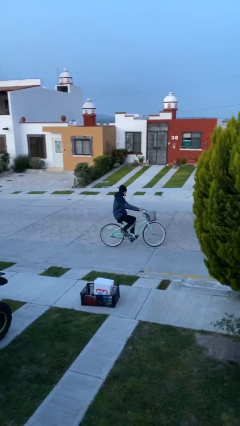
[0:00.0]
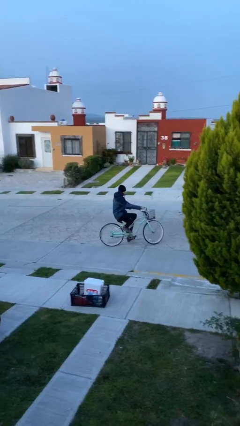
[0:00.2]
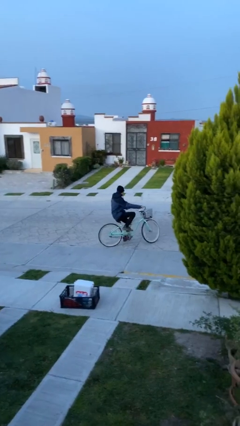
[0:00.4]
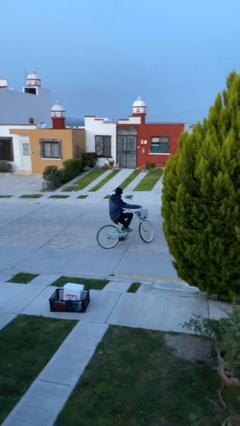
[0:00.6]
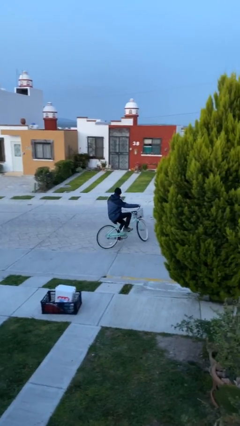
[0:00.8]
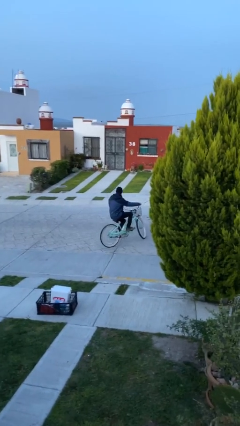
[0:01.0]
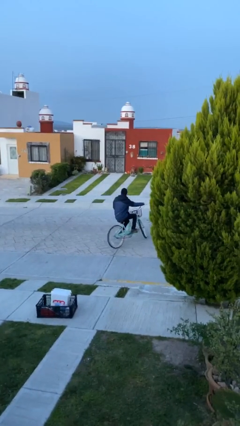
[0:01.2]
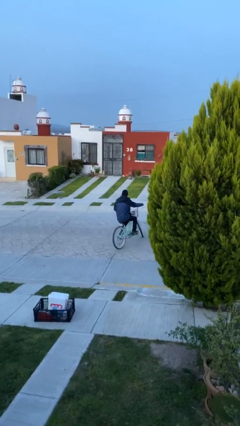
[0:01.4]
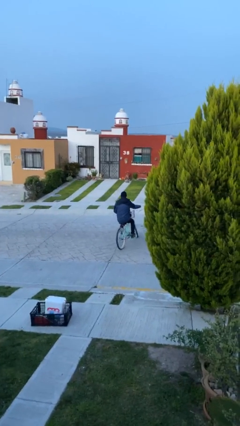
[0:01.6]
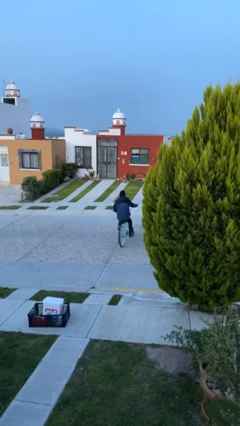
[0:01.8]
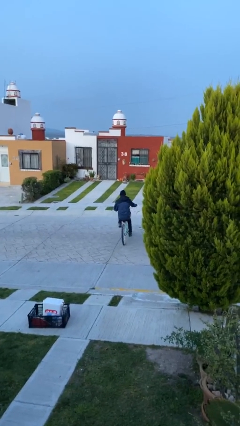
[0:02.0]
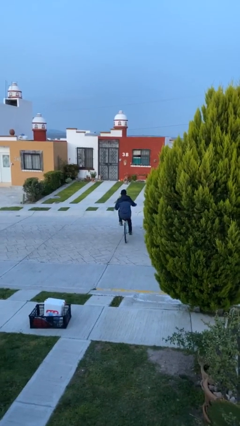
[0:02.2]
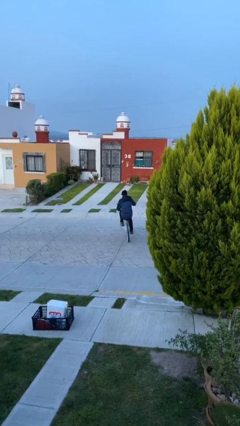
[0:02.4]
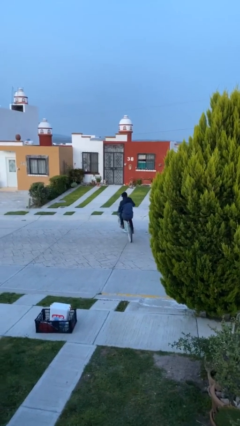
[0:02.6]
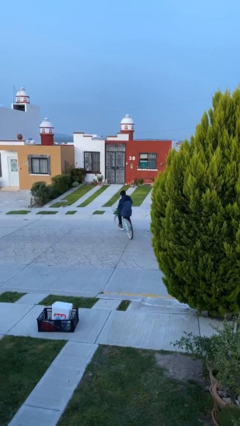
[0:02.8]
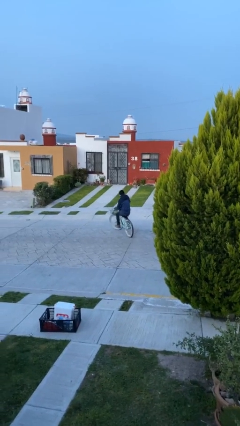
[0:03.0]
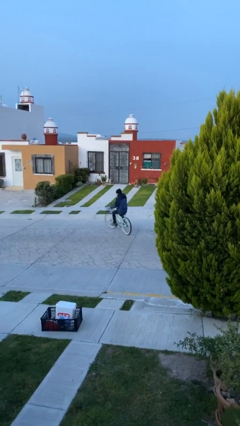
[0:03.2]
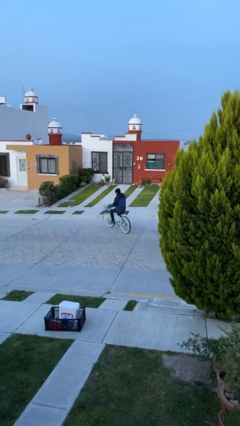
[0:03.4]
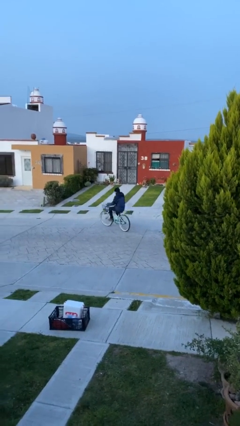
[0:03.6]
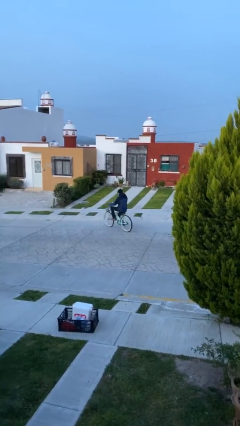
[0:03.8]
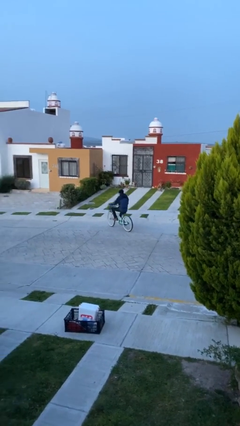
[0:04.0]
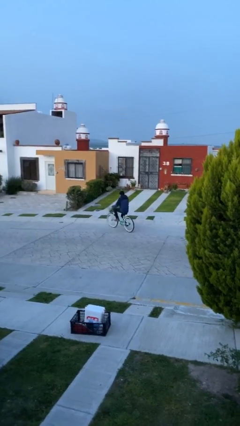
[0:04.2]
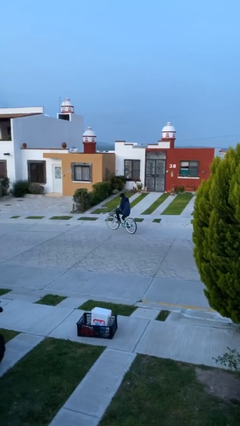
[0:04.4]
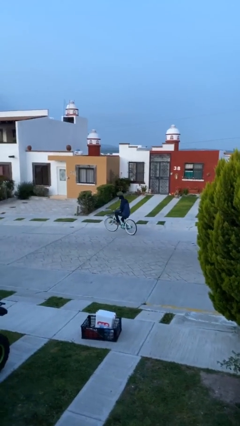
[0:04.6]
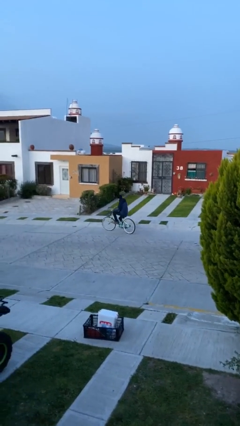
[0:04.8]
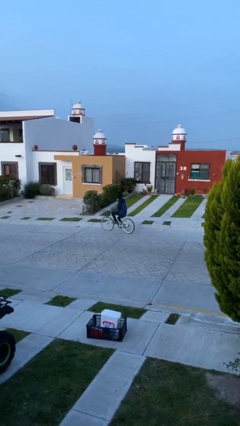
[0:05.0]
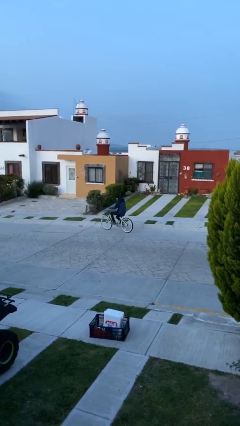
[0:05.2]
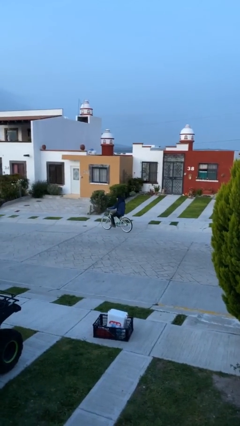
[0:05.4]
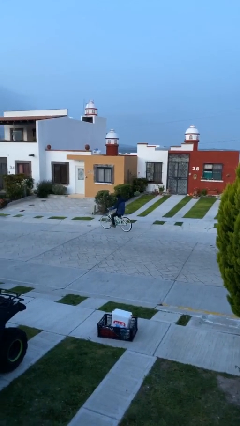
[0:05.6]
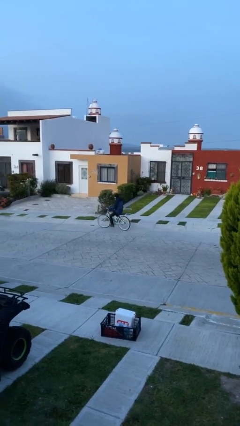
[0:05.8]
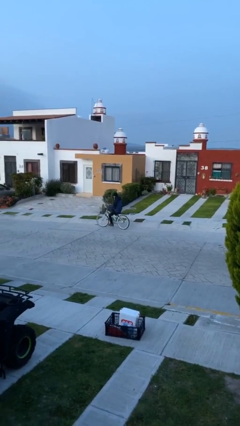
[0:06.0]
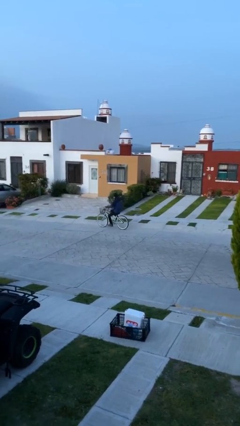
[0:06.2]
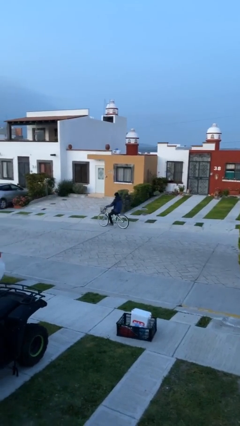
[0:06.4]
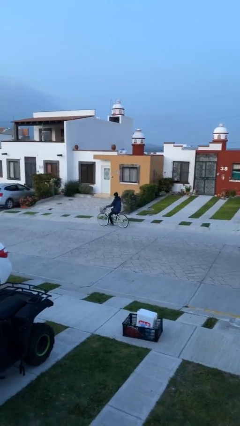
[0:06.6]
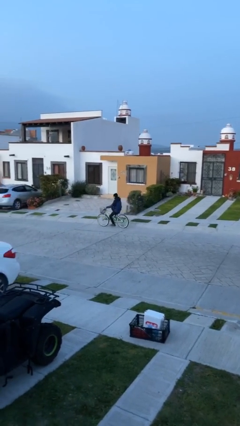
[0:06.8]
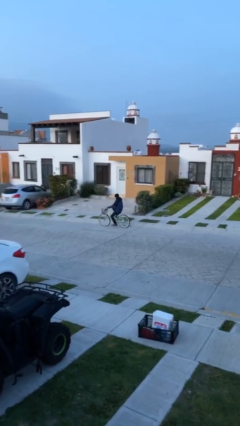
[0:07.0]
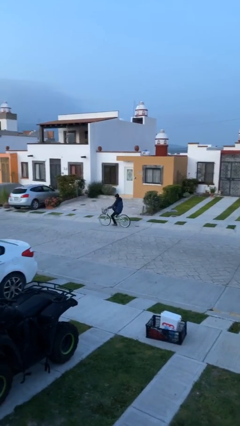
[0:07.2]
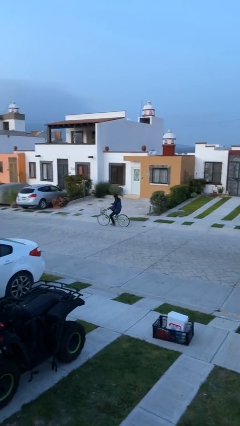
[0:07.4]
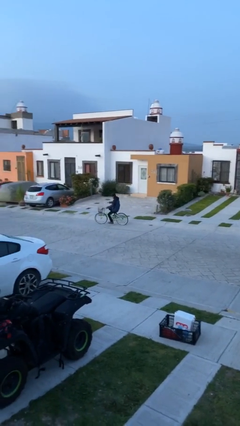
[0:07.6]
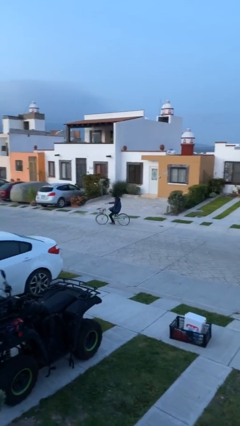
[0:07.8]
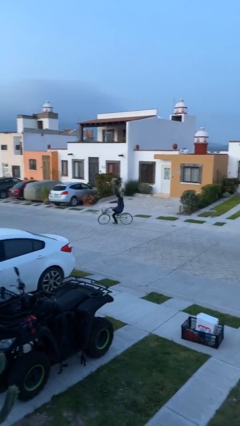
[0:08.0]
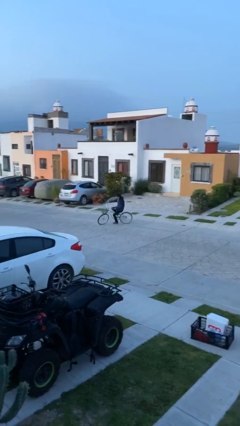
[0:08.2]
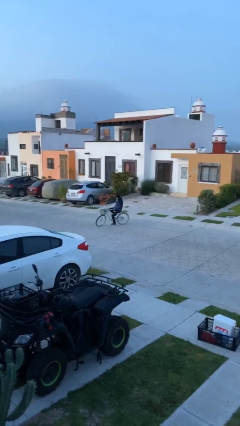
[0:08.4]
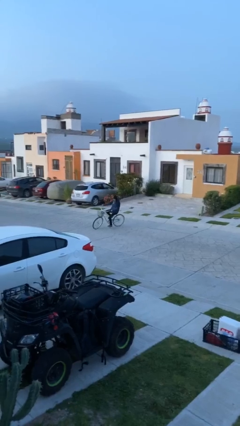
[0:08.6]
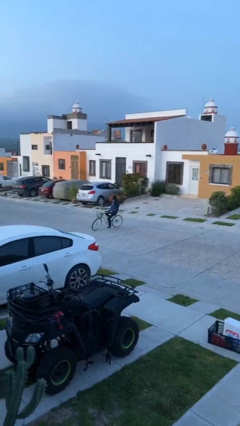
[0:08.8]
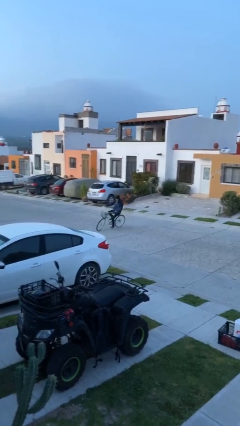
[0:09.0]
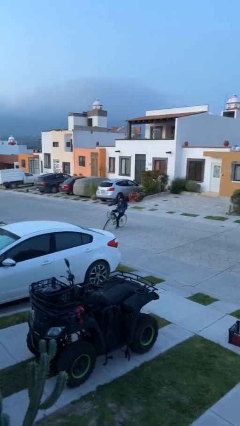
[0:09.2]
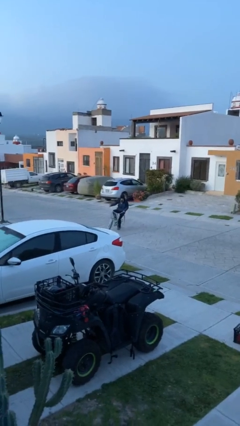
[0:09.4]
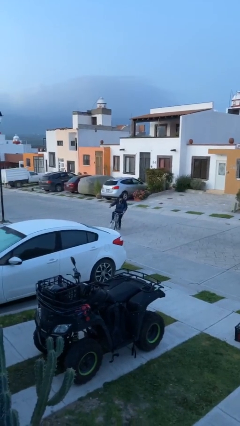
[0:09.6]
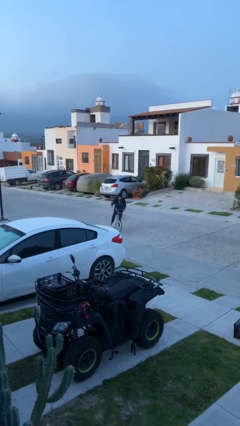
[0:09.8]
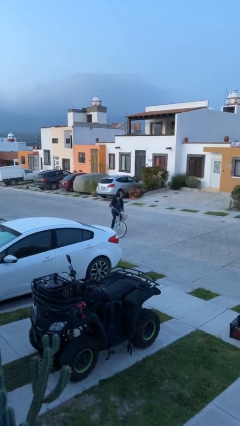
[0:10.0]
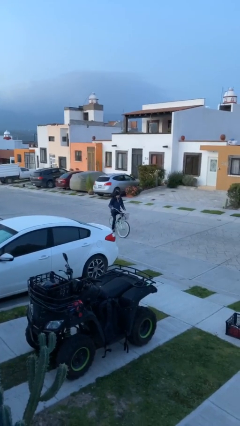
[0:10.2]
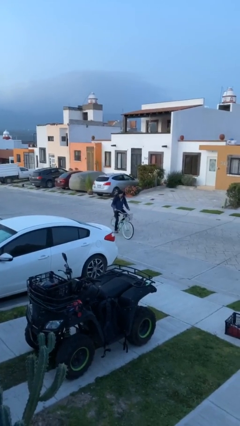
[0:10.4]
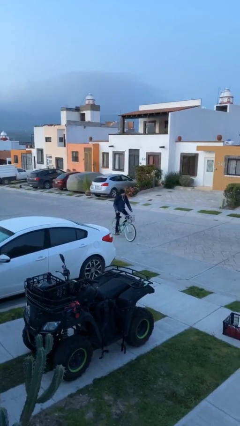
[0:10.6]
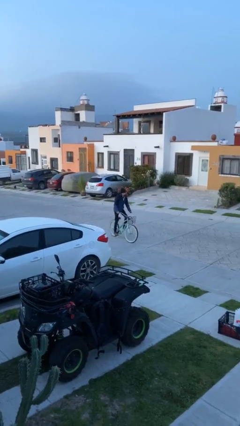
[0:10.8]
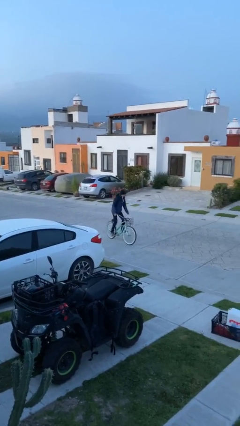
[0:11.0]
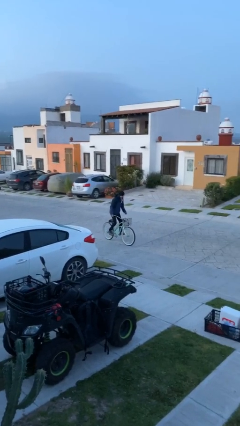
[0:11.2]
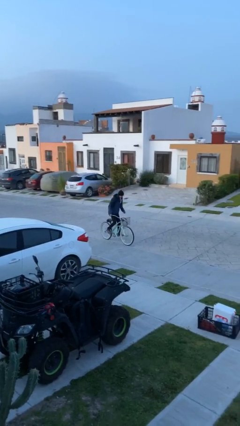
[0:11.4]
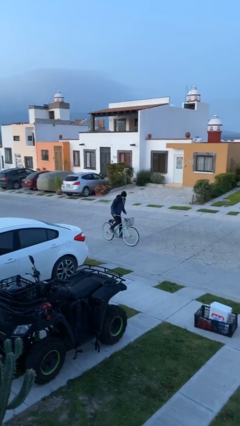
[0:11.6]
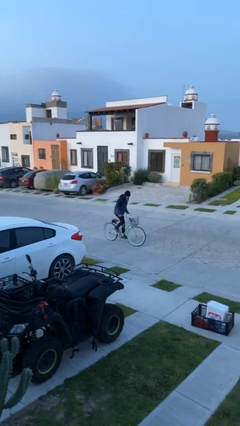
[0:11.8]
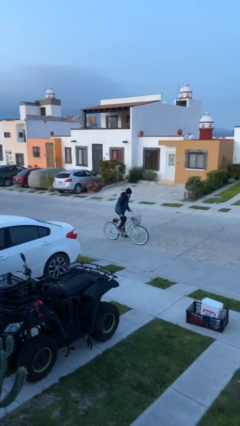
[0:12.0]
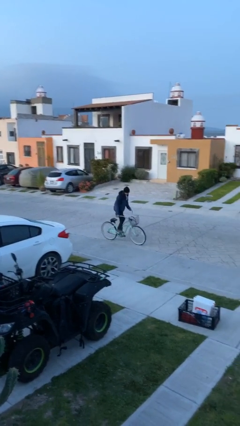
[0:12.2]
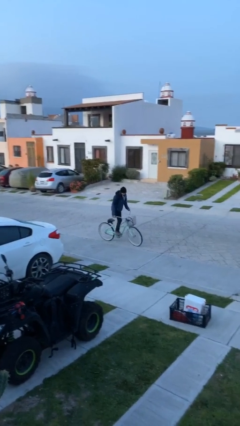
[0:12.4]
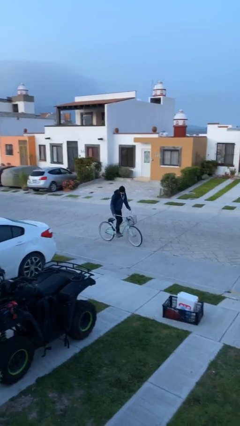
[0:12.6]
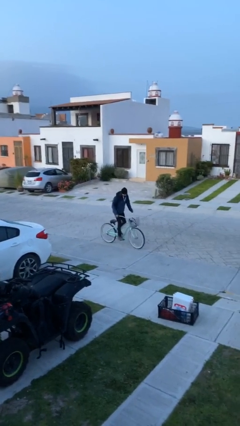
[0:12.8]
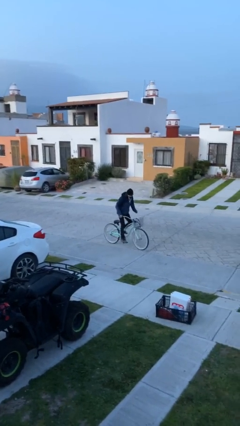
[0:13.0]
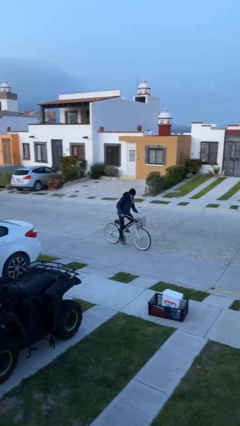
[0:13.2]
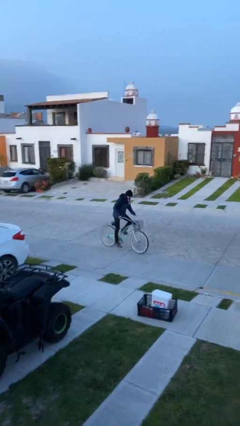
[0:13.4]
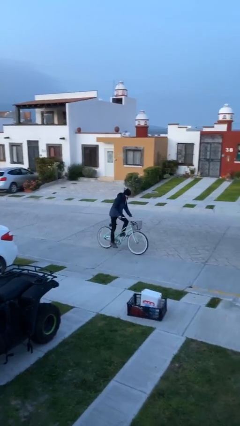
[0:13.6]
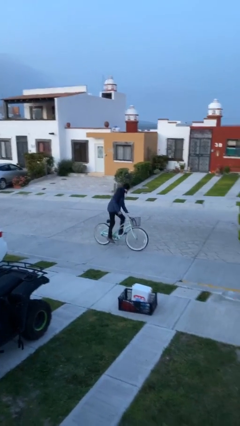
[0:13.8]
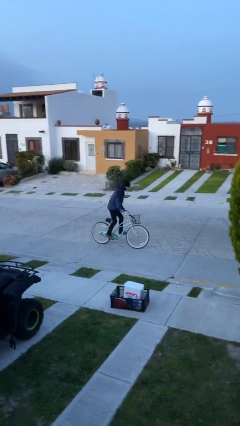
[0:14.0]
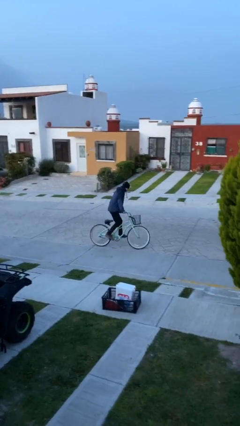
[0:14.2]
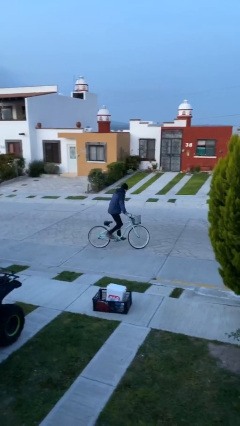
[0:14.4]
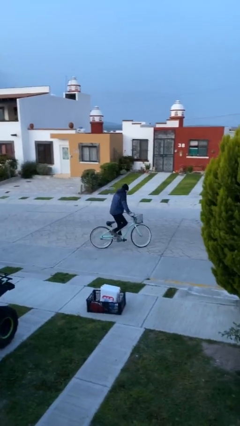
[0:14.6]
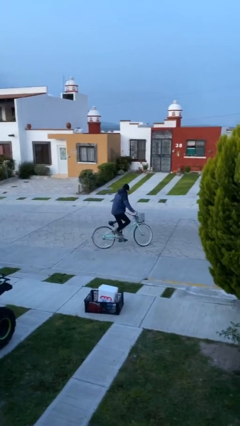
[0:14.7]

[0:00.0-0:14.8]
person rides bicycle

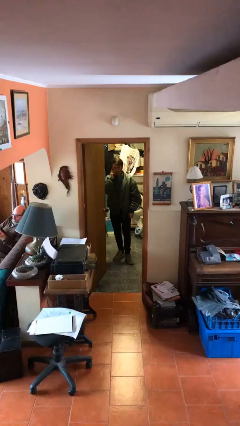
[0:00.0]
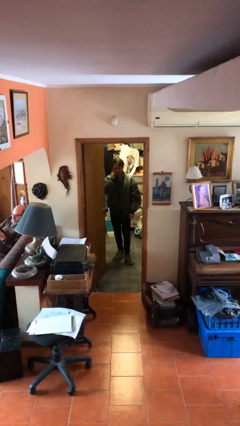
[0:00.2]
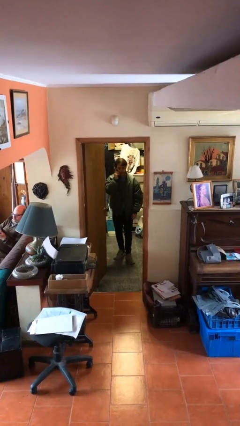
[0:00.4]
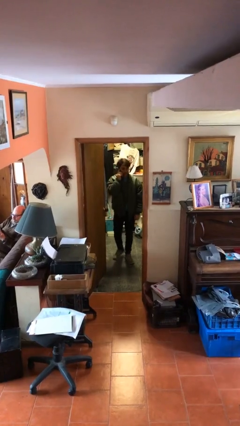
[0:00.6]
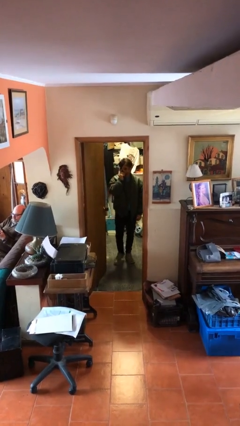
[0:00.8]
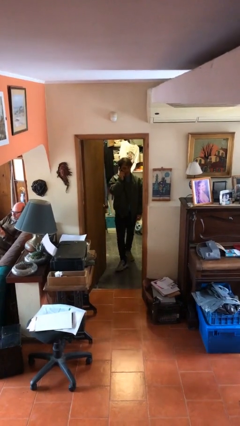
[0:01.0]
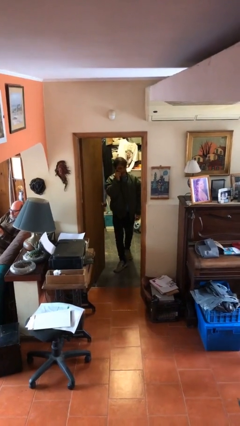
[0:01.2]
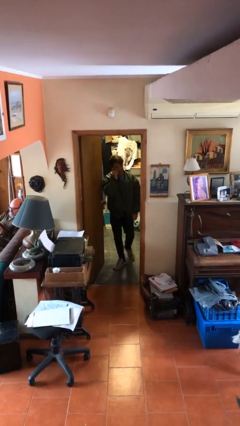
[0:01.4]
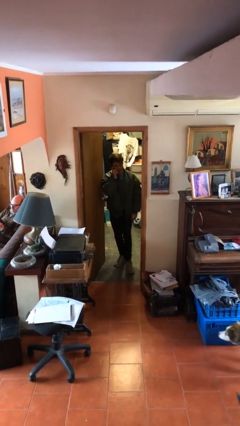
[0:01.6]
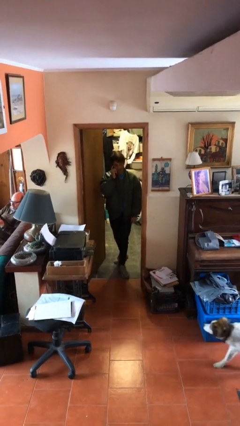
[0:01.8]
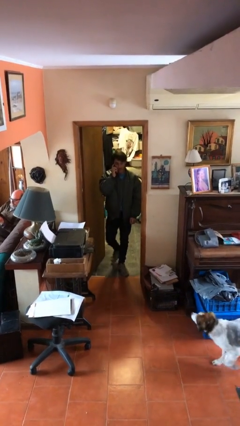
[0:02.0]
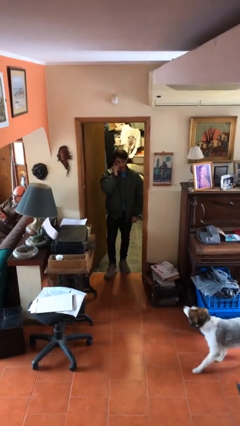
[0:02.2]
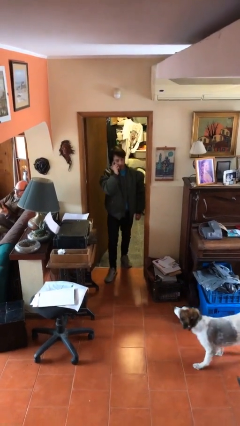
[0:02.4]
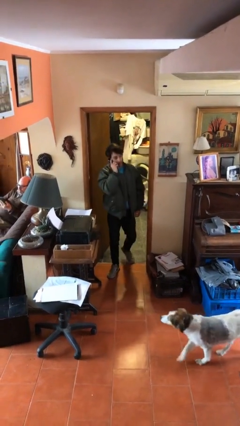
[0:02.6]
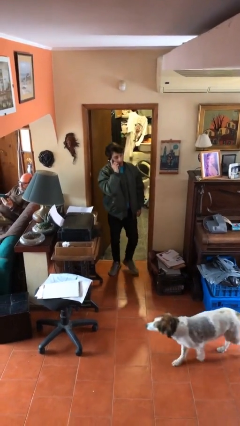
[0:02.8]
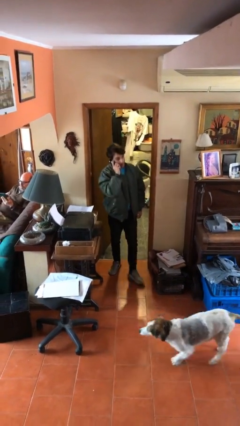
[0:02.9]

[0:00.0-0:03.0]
person enters scene through structure
